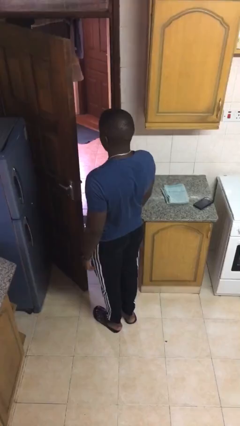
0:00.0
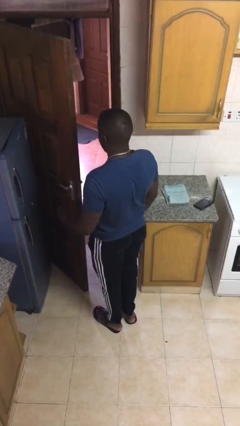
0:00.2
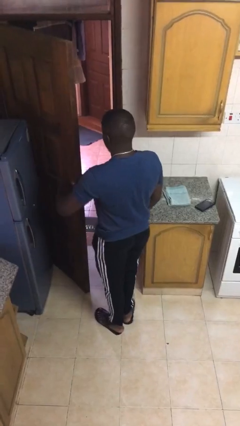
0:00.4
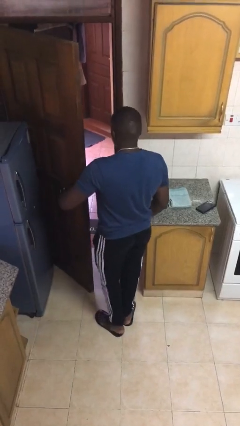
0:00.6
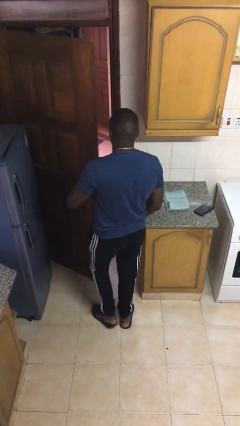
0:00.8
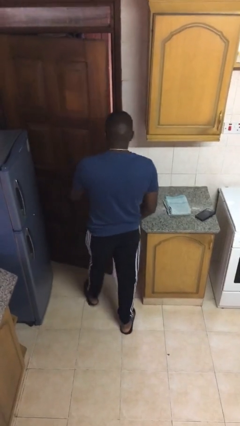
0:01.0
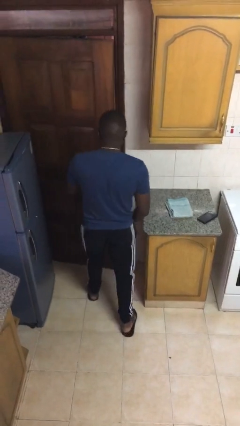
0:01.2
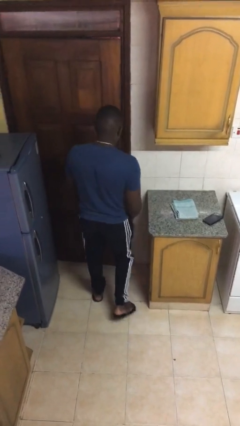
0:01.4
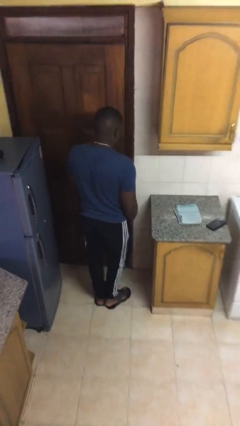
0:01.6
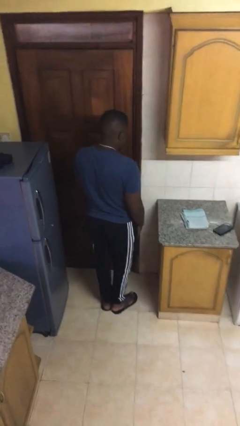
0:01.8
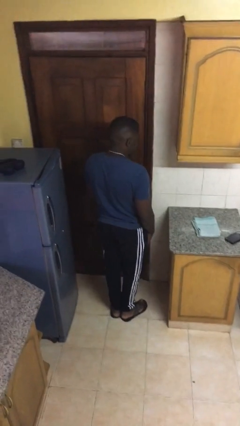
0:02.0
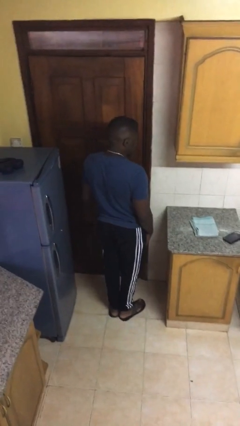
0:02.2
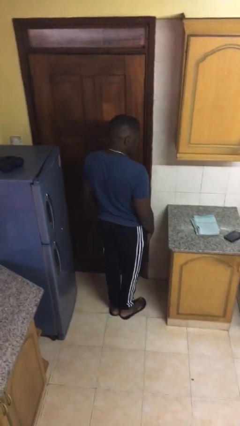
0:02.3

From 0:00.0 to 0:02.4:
person closes facility door

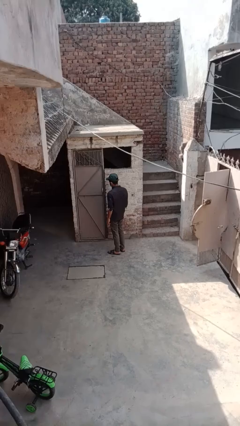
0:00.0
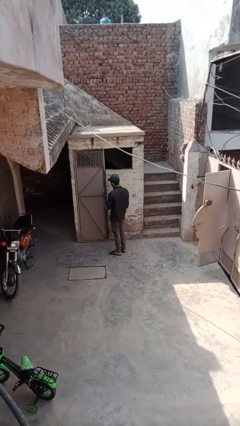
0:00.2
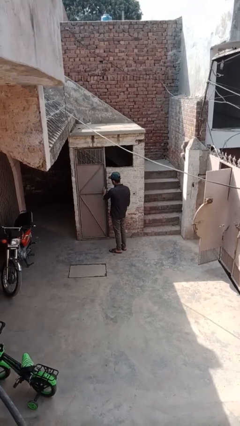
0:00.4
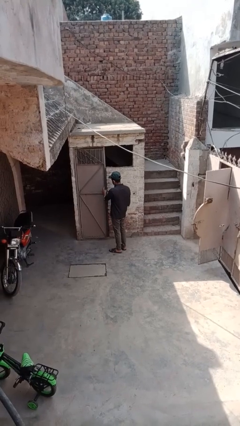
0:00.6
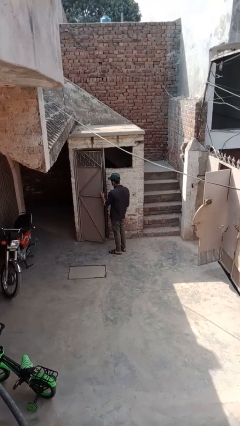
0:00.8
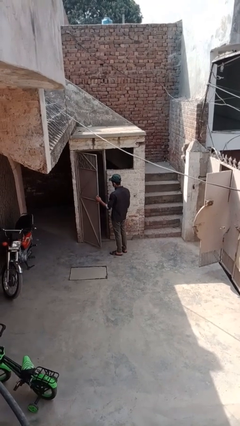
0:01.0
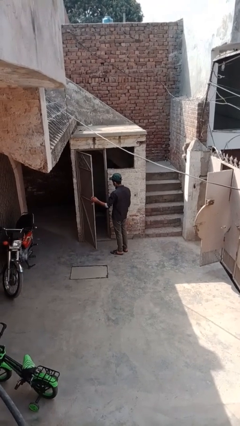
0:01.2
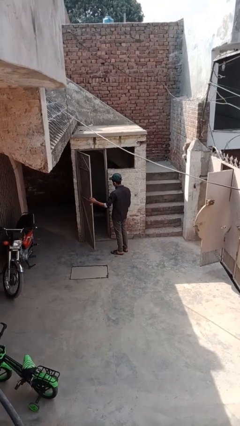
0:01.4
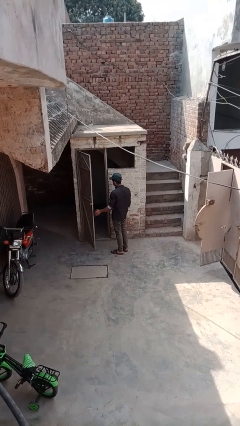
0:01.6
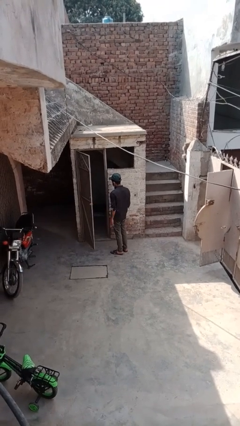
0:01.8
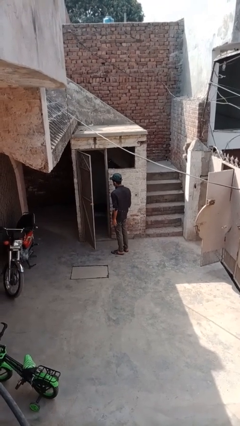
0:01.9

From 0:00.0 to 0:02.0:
person opens facility door

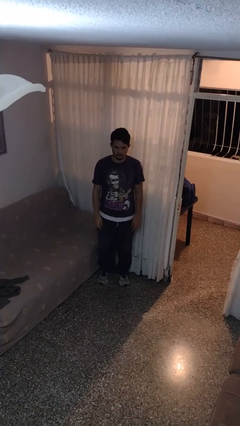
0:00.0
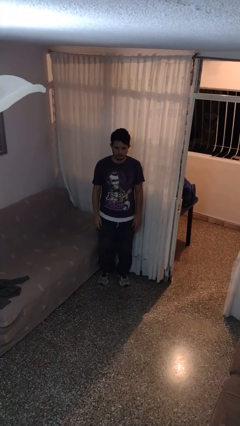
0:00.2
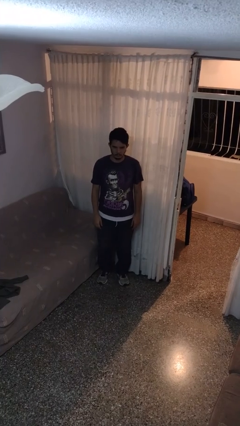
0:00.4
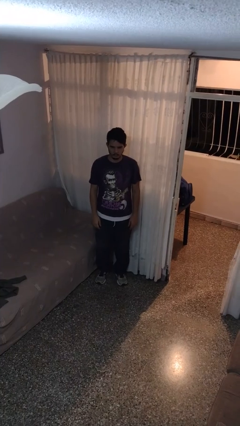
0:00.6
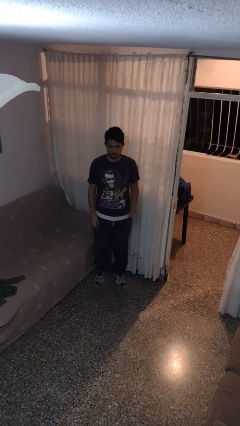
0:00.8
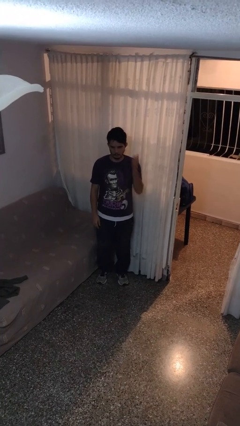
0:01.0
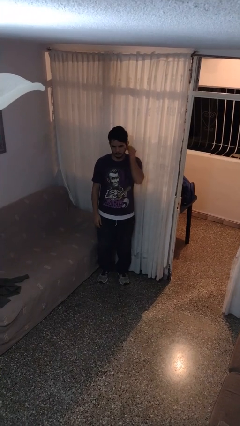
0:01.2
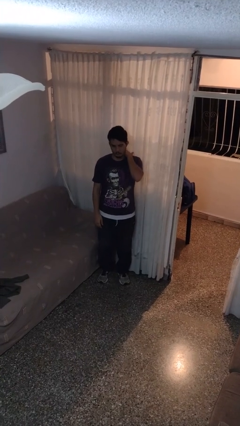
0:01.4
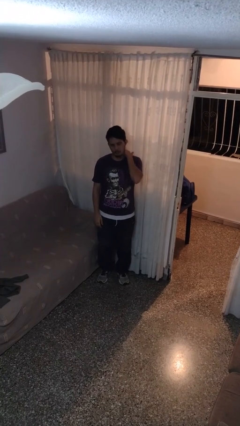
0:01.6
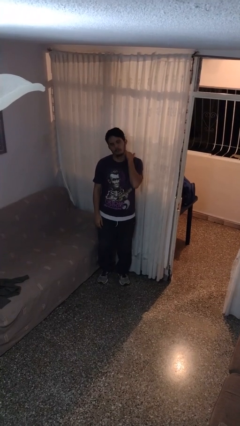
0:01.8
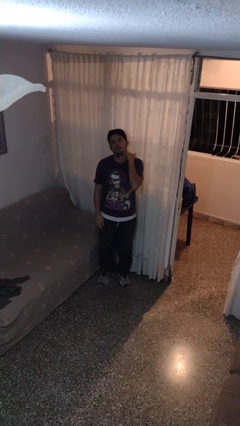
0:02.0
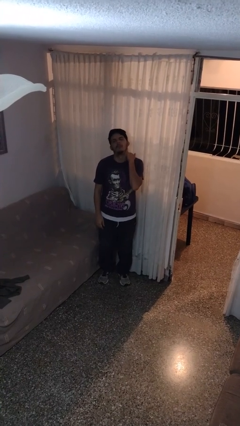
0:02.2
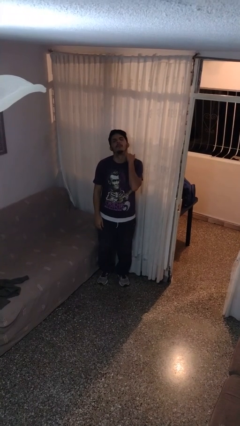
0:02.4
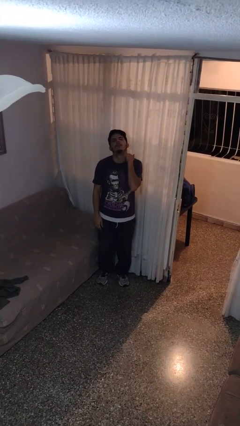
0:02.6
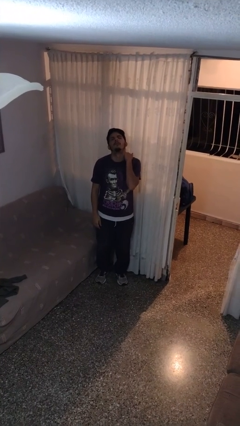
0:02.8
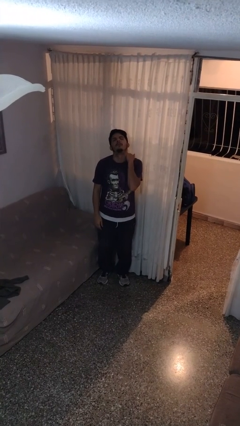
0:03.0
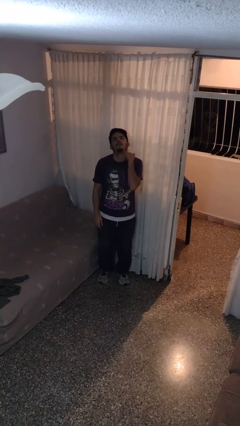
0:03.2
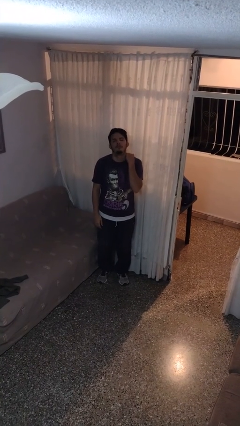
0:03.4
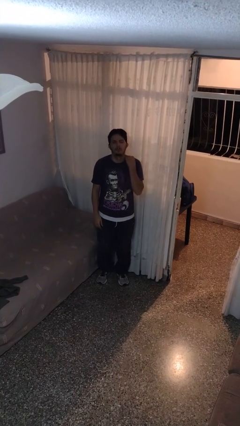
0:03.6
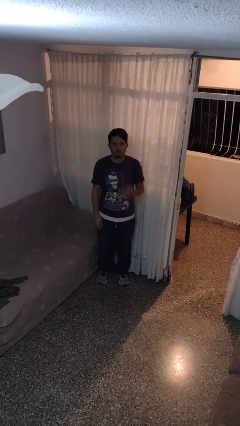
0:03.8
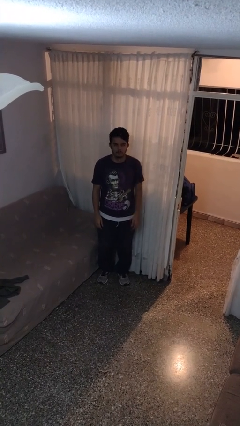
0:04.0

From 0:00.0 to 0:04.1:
person rubs neck

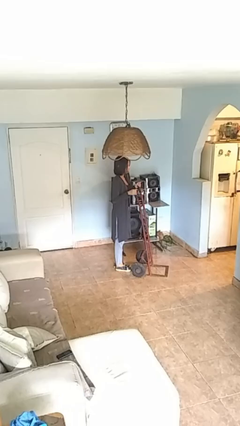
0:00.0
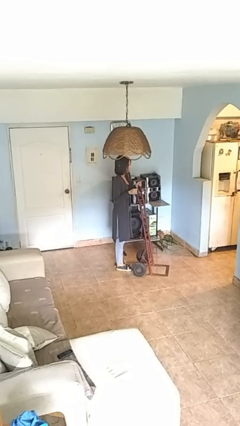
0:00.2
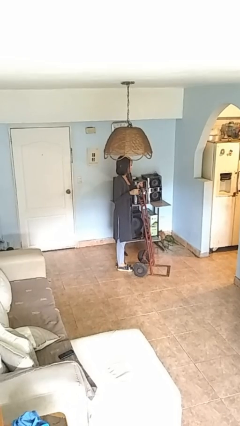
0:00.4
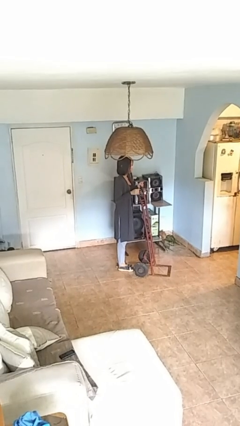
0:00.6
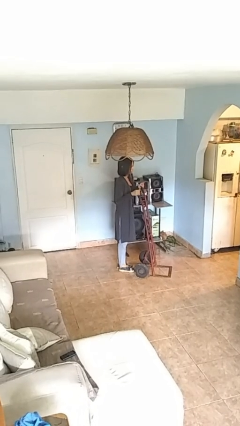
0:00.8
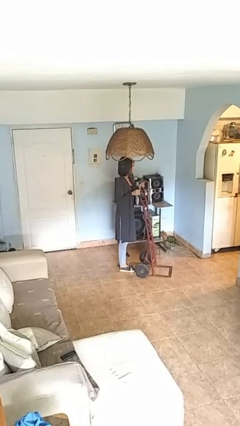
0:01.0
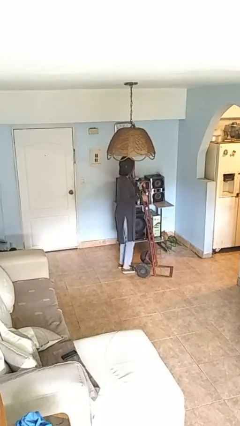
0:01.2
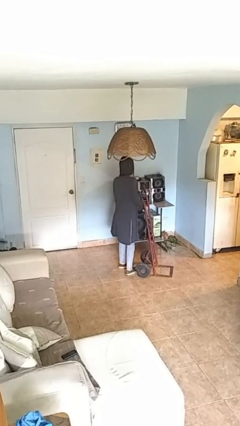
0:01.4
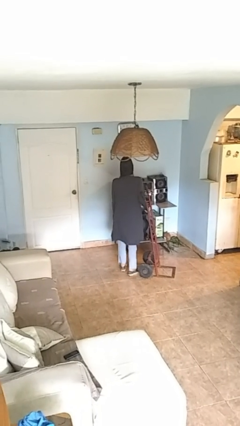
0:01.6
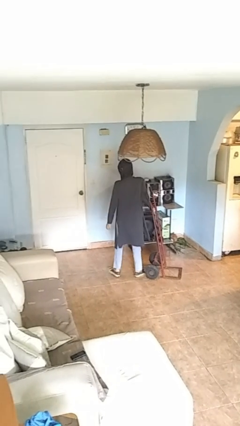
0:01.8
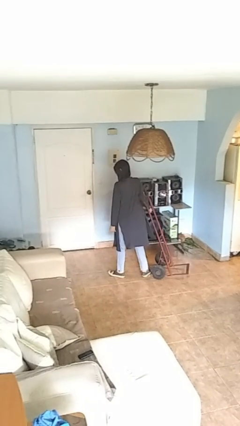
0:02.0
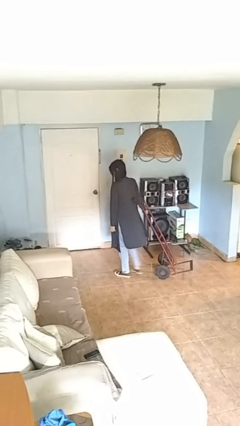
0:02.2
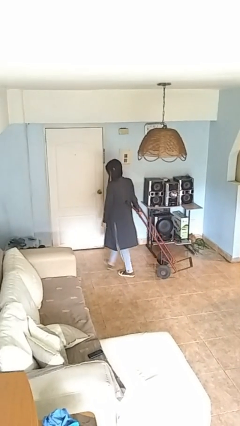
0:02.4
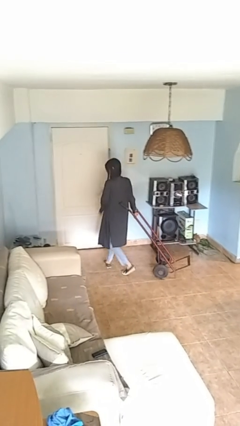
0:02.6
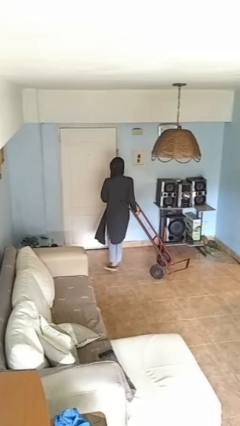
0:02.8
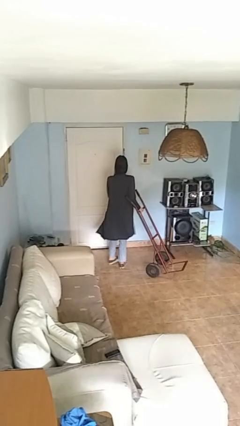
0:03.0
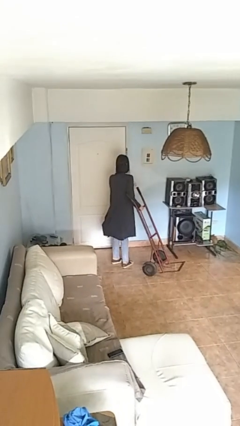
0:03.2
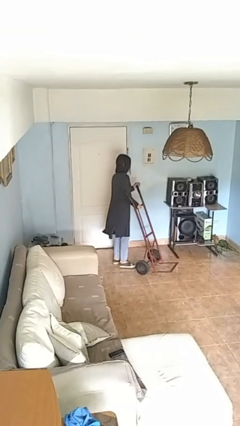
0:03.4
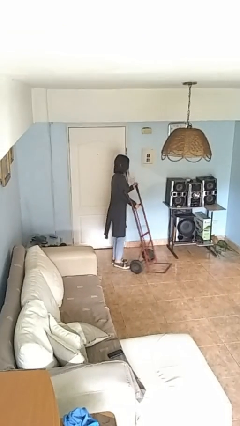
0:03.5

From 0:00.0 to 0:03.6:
person pulls wheeled cart

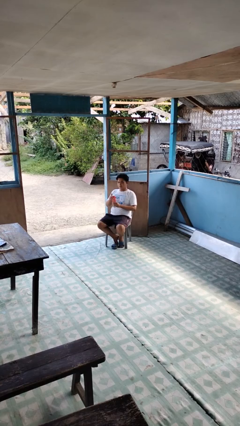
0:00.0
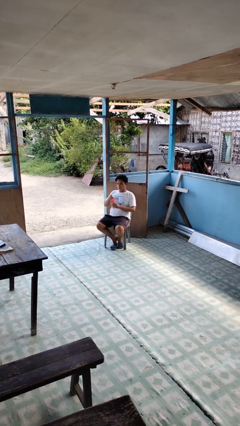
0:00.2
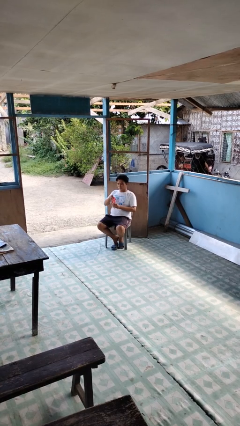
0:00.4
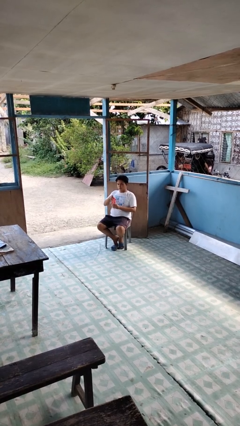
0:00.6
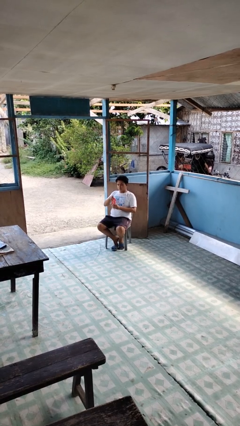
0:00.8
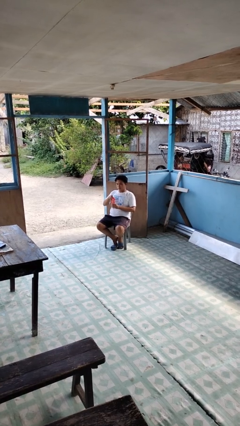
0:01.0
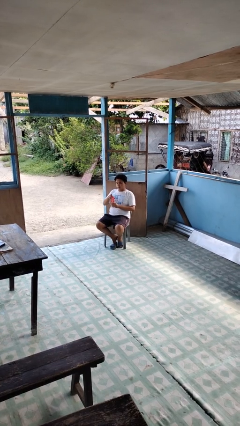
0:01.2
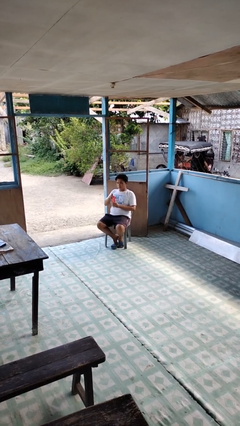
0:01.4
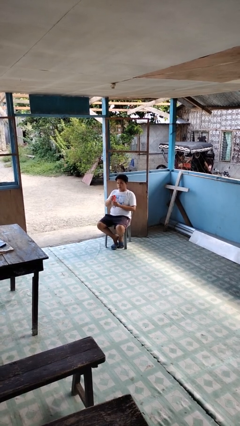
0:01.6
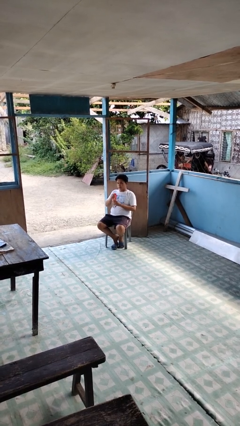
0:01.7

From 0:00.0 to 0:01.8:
person opens beverage can

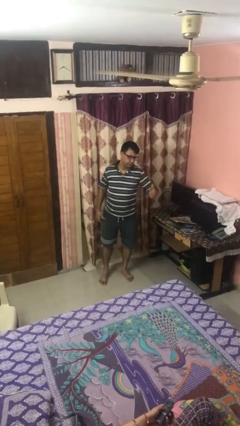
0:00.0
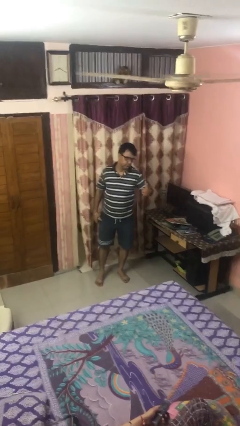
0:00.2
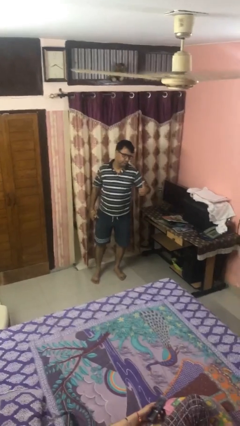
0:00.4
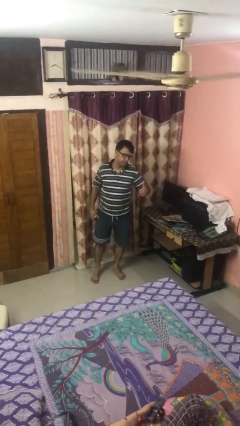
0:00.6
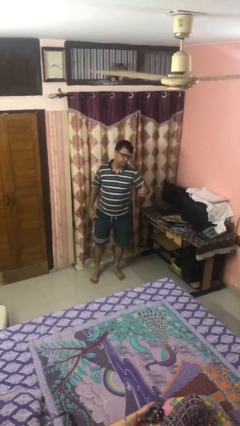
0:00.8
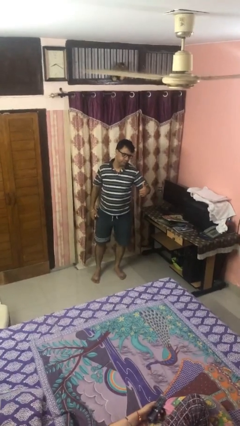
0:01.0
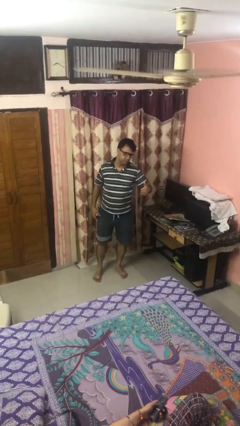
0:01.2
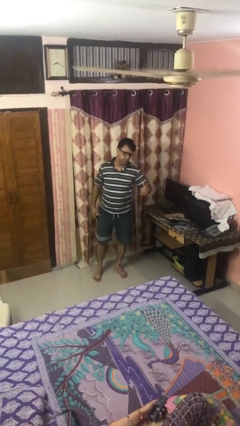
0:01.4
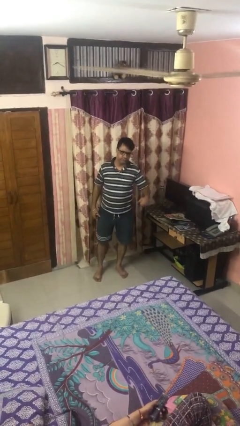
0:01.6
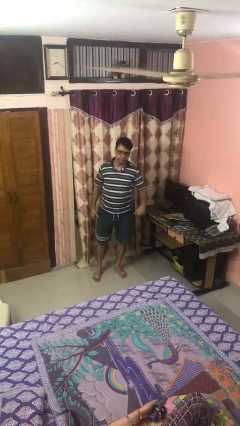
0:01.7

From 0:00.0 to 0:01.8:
person gestures thumbs up

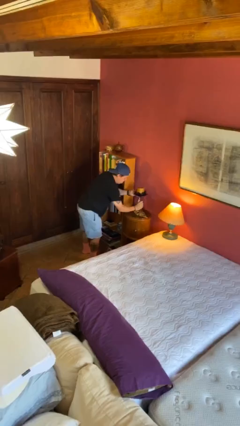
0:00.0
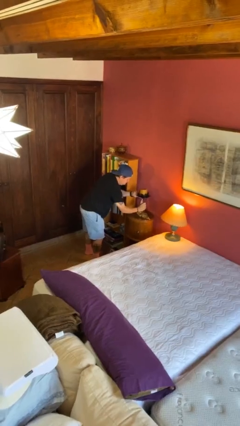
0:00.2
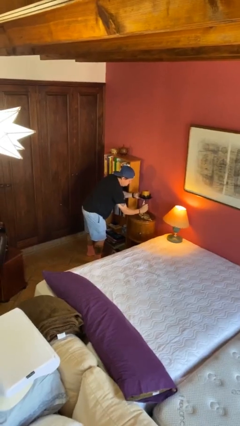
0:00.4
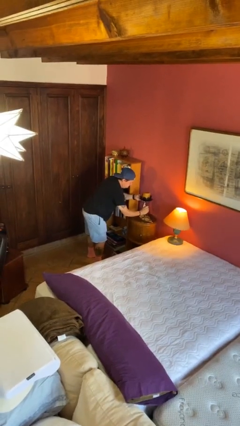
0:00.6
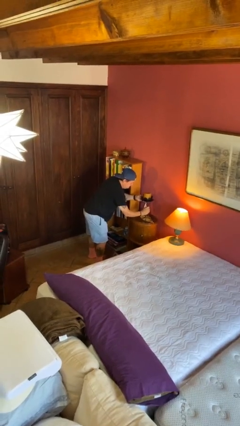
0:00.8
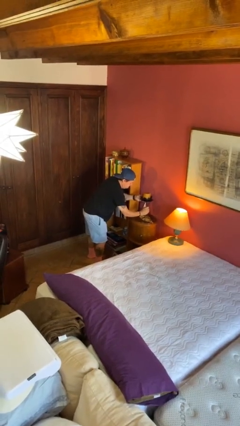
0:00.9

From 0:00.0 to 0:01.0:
person puts down object on table

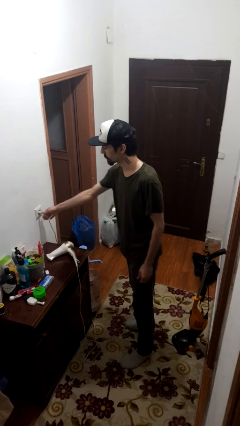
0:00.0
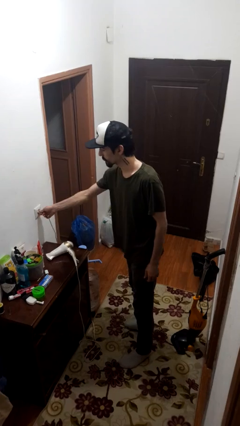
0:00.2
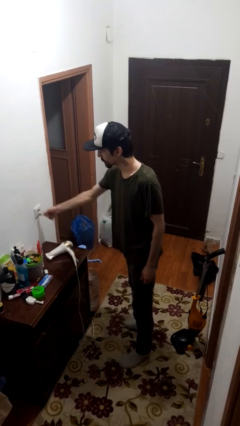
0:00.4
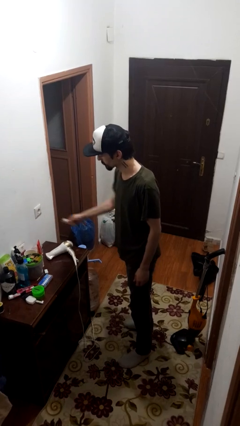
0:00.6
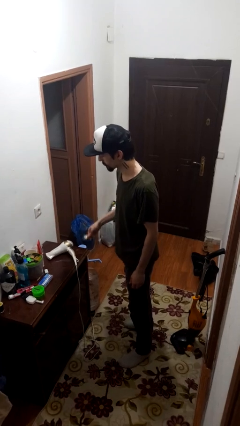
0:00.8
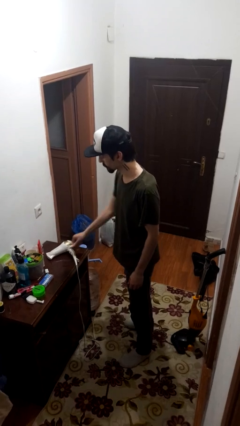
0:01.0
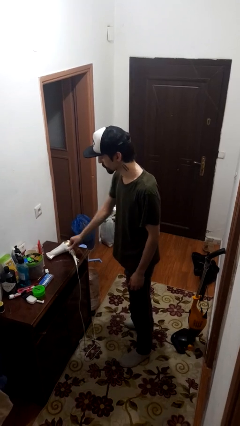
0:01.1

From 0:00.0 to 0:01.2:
person unplugs from electrical socket
